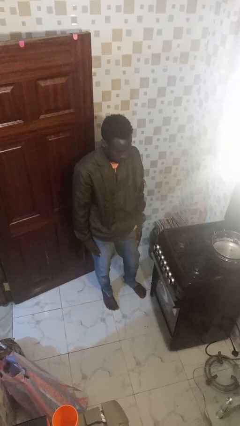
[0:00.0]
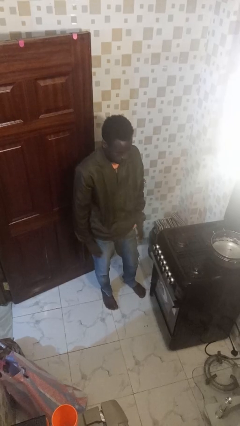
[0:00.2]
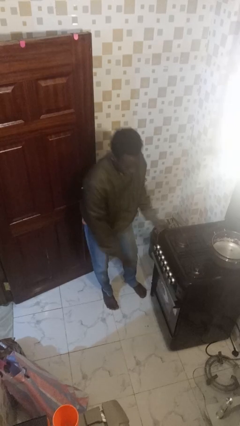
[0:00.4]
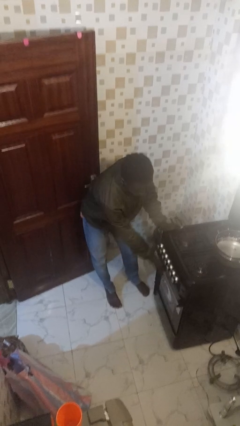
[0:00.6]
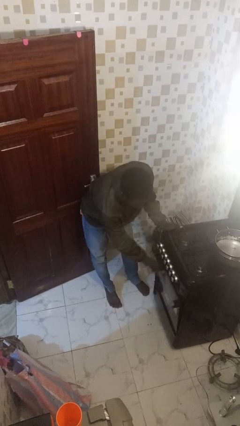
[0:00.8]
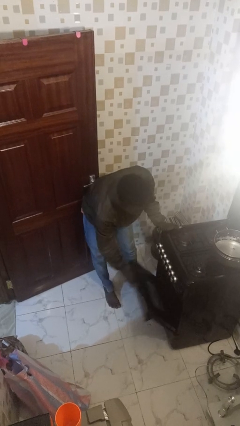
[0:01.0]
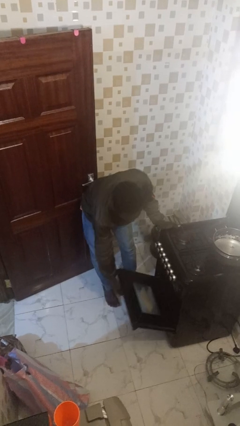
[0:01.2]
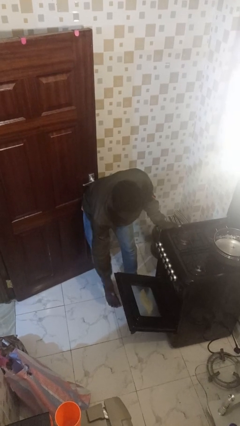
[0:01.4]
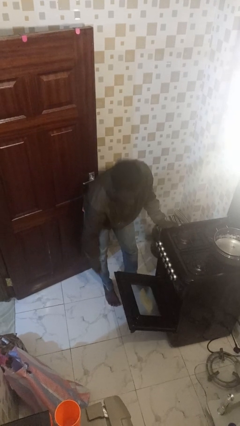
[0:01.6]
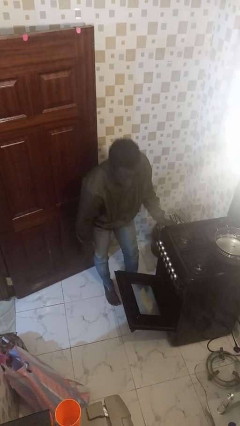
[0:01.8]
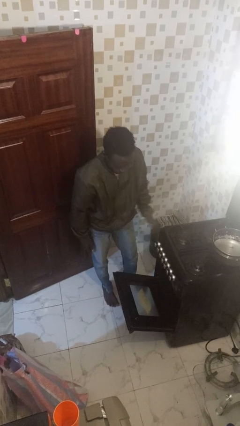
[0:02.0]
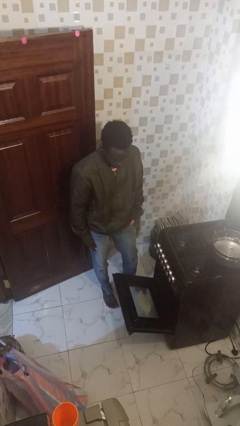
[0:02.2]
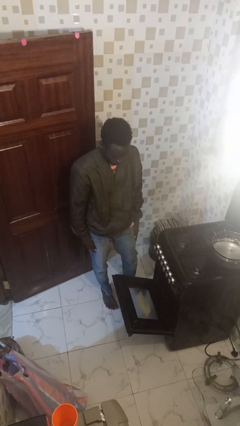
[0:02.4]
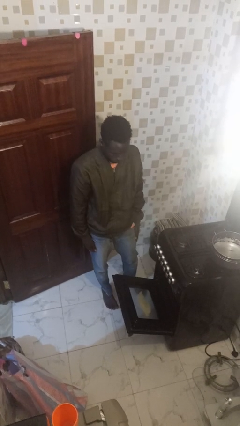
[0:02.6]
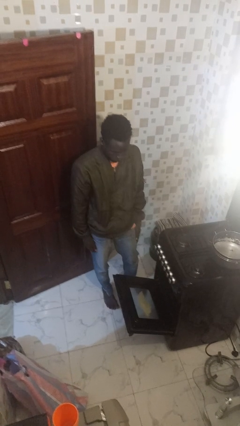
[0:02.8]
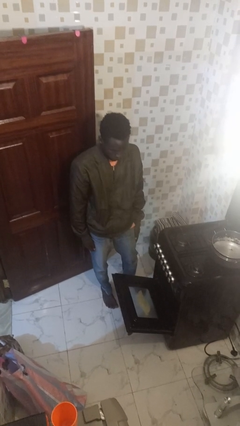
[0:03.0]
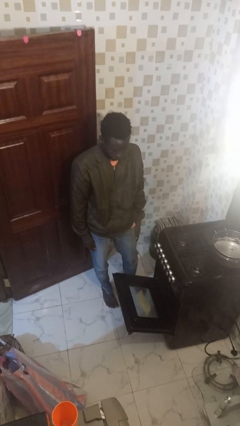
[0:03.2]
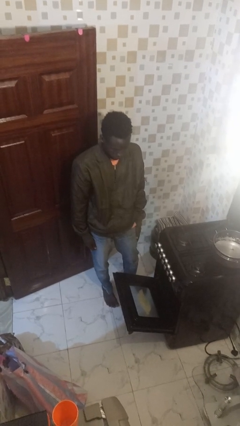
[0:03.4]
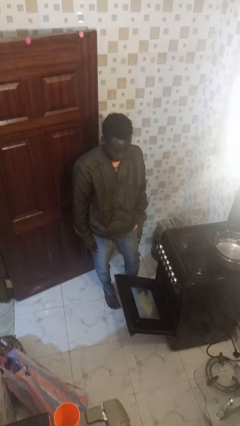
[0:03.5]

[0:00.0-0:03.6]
person opens oven door

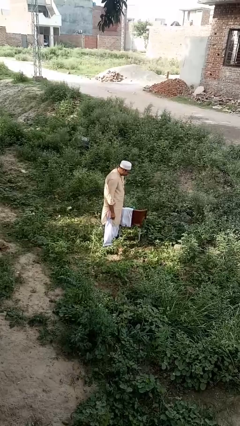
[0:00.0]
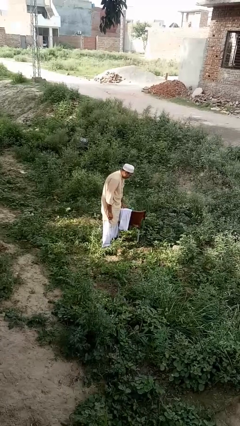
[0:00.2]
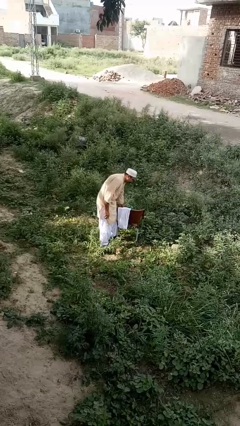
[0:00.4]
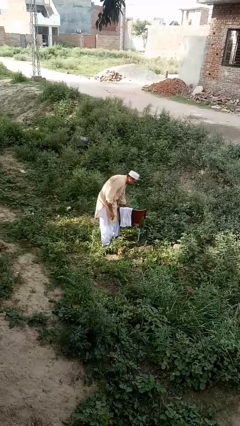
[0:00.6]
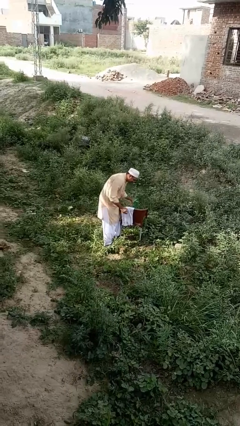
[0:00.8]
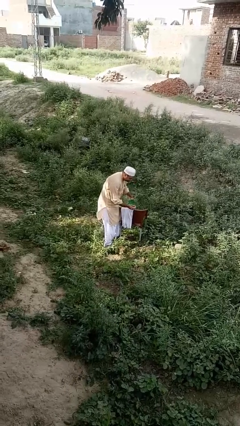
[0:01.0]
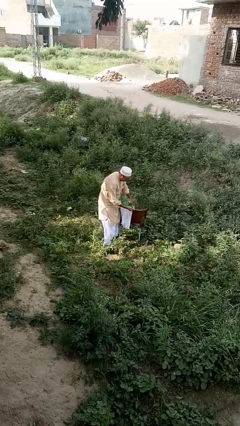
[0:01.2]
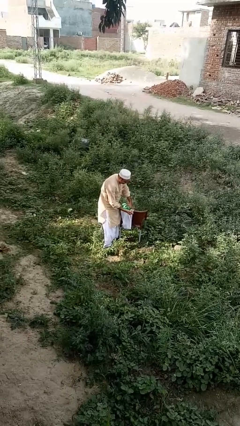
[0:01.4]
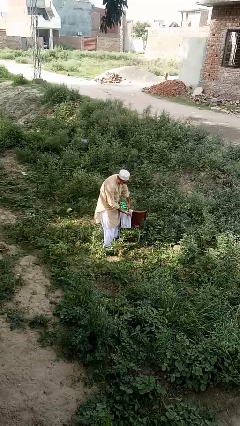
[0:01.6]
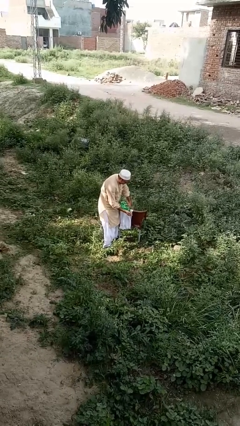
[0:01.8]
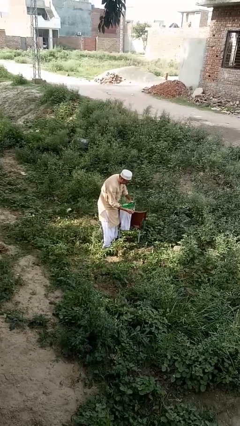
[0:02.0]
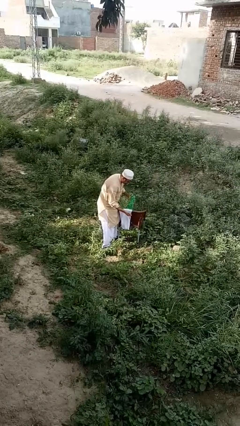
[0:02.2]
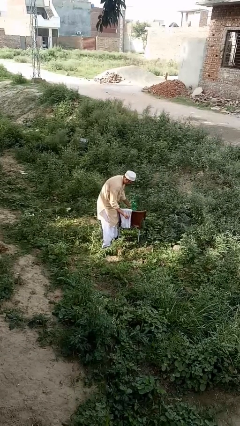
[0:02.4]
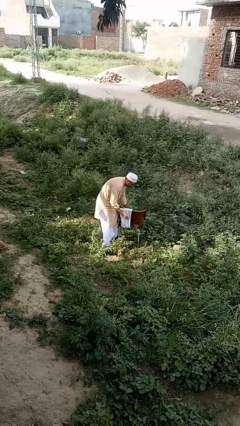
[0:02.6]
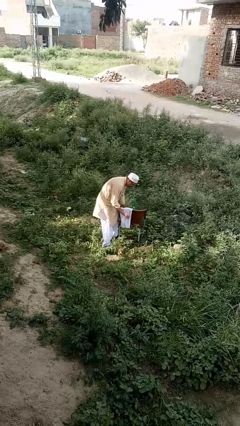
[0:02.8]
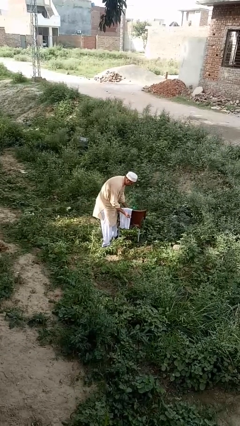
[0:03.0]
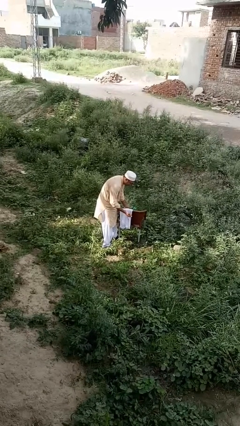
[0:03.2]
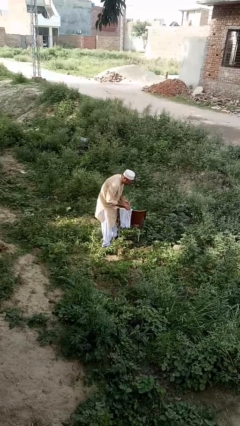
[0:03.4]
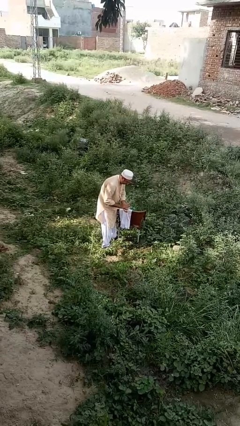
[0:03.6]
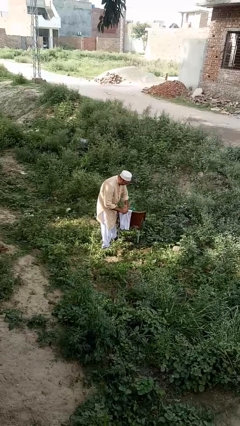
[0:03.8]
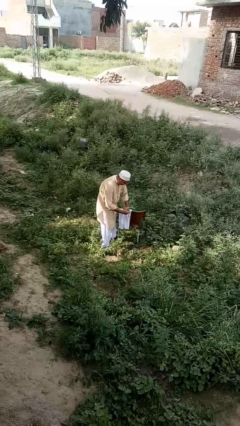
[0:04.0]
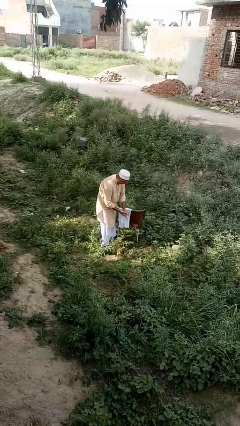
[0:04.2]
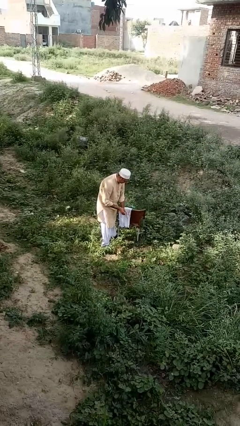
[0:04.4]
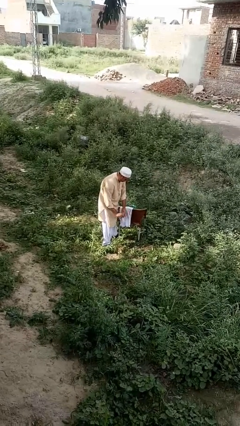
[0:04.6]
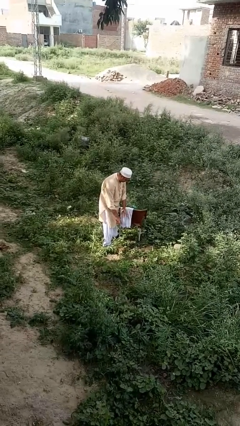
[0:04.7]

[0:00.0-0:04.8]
person washes hands

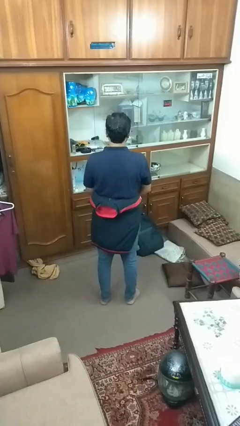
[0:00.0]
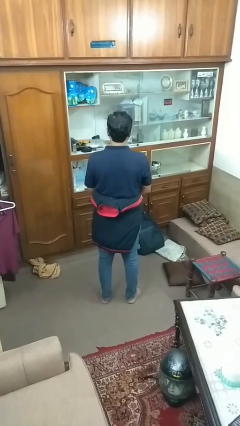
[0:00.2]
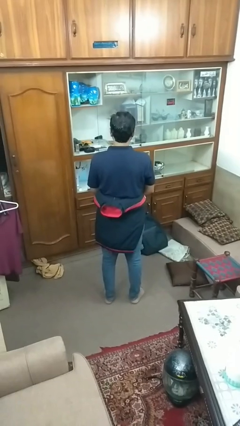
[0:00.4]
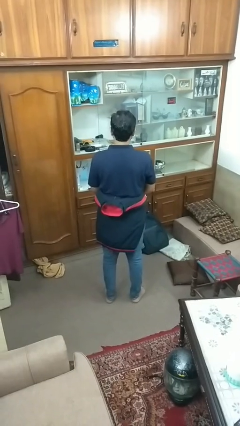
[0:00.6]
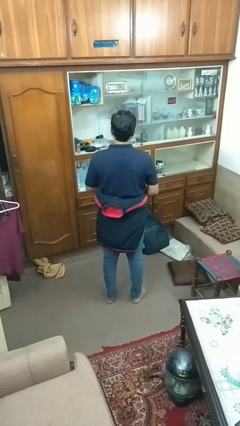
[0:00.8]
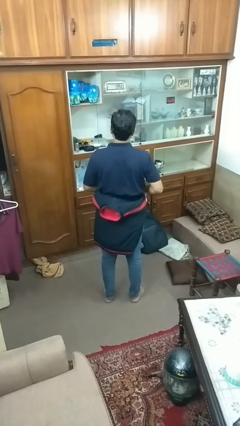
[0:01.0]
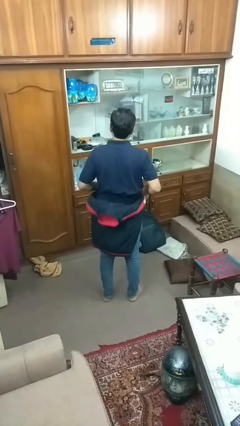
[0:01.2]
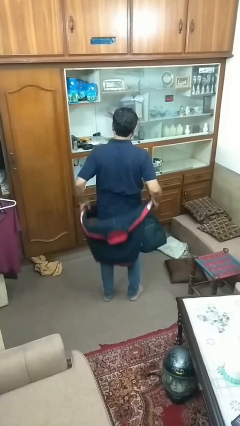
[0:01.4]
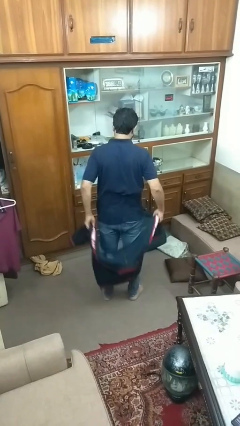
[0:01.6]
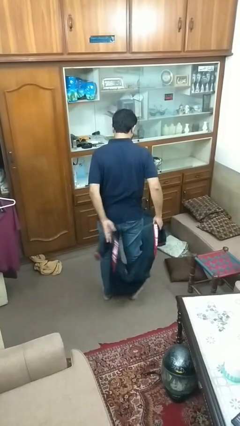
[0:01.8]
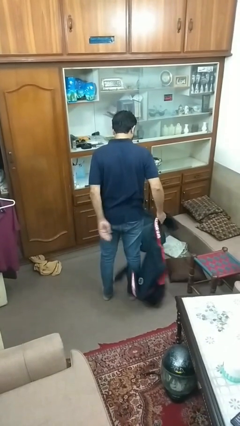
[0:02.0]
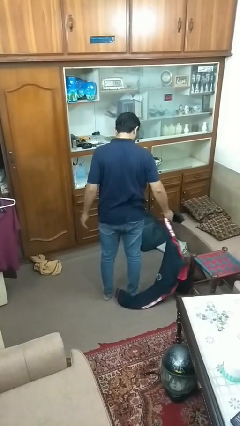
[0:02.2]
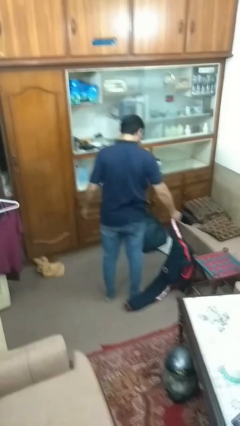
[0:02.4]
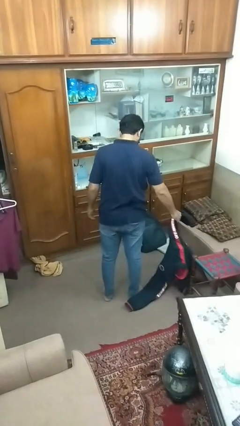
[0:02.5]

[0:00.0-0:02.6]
person unties jacket around waist

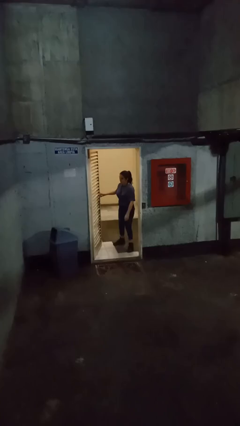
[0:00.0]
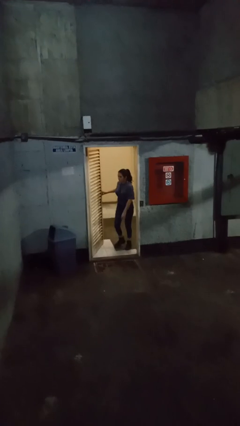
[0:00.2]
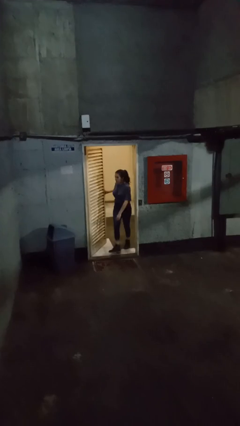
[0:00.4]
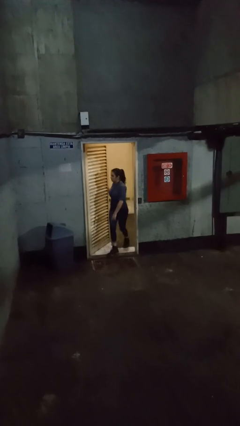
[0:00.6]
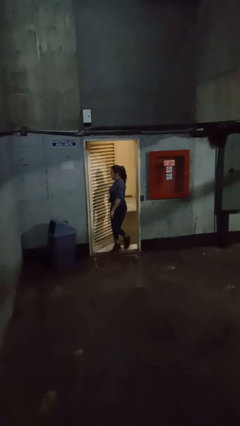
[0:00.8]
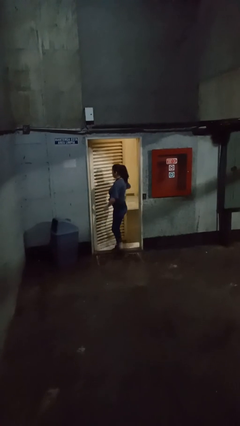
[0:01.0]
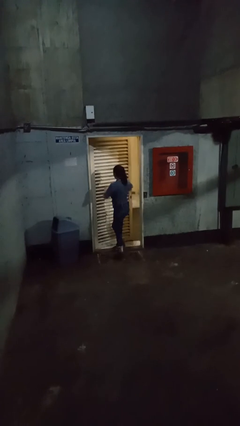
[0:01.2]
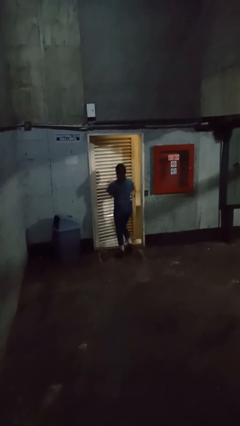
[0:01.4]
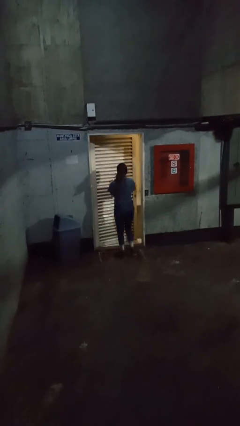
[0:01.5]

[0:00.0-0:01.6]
person closes facility door

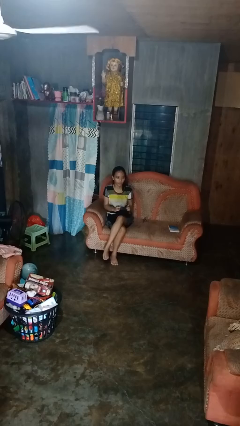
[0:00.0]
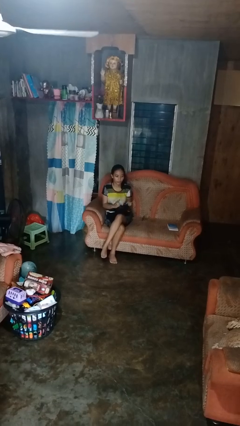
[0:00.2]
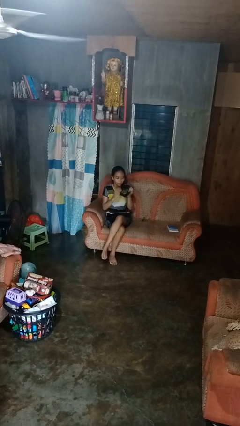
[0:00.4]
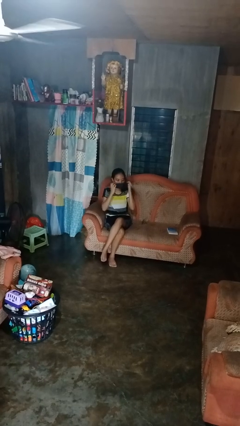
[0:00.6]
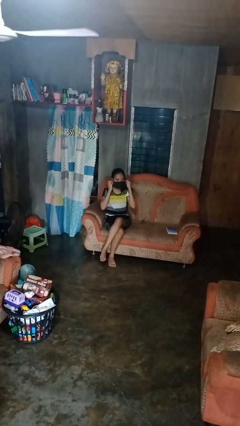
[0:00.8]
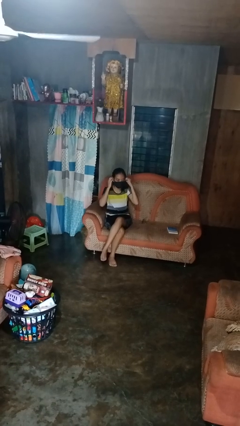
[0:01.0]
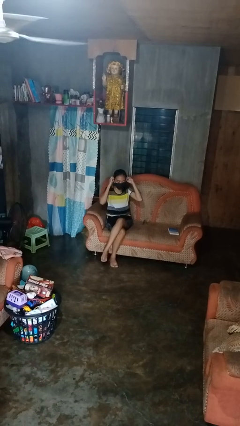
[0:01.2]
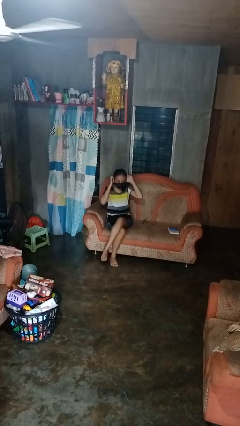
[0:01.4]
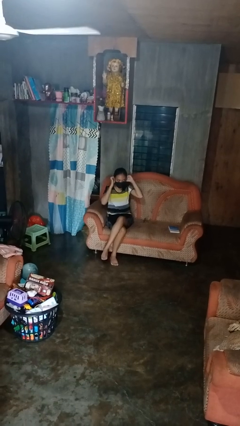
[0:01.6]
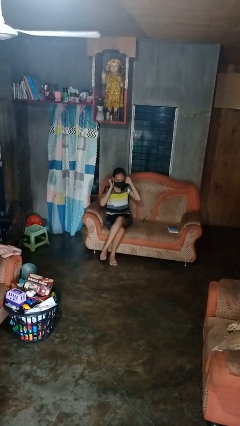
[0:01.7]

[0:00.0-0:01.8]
person puts on facemask

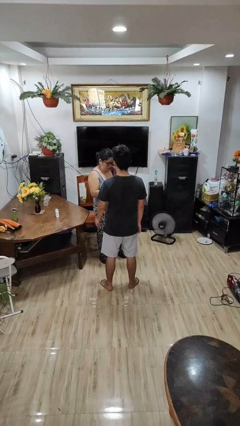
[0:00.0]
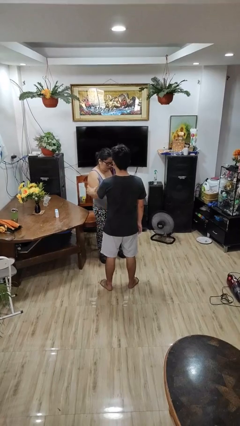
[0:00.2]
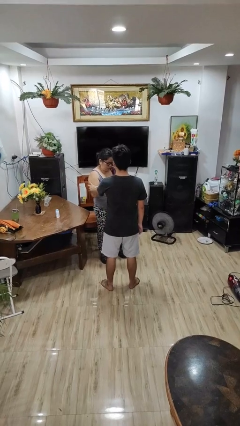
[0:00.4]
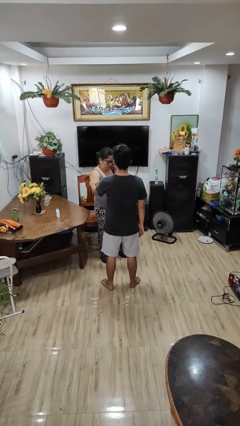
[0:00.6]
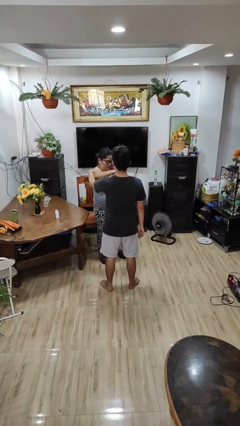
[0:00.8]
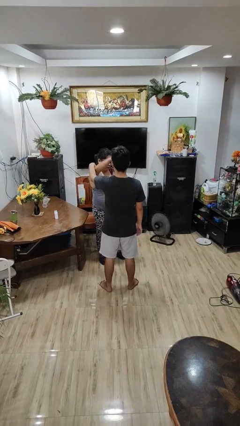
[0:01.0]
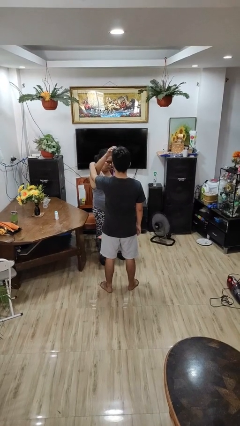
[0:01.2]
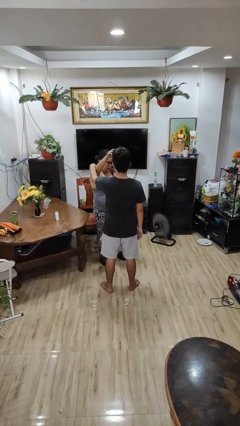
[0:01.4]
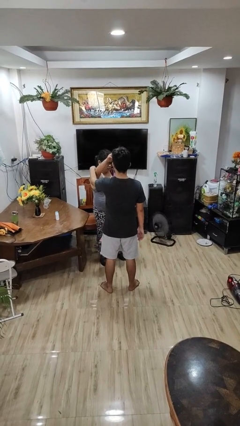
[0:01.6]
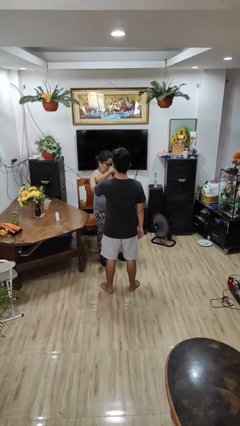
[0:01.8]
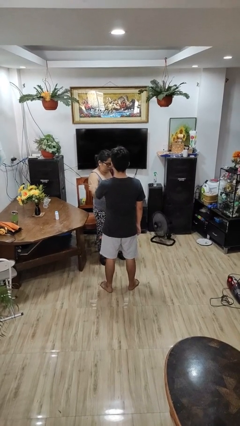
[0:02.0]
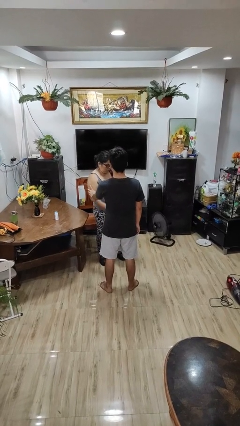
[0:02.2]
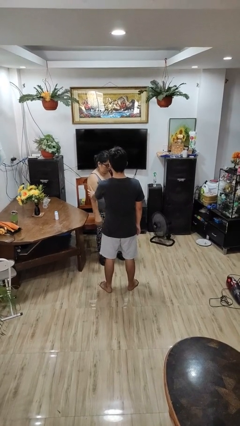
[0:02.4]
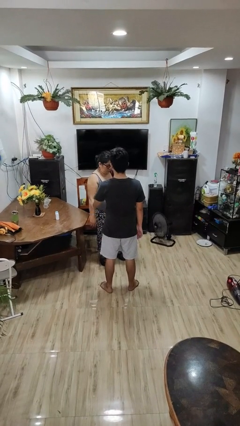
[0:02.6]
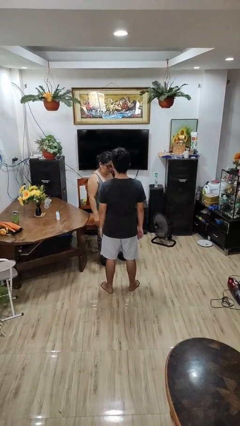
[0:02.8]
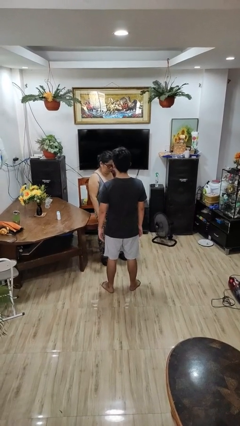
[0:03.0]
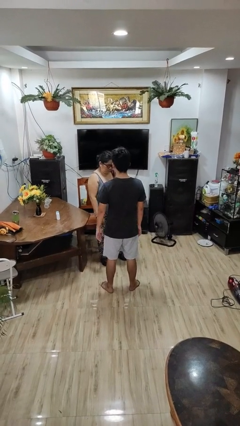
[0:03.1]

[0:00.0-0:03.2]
person grabs person by bicep
